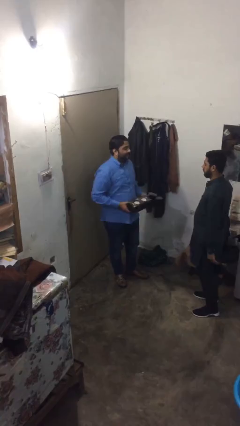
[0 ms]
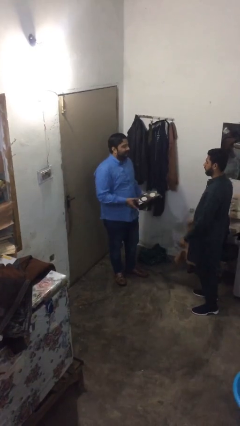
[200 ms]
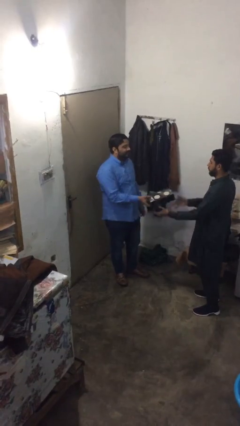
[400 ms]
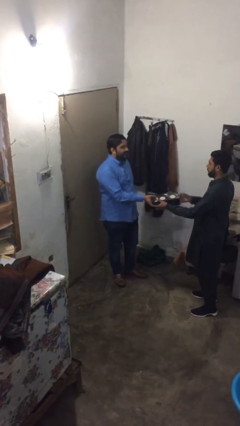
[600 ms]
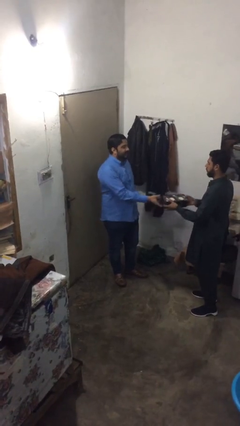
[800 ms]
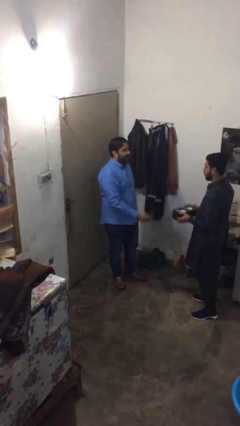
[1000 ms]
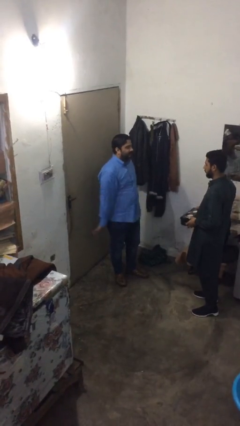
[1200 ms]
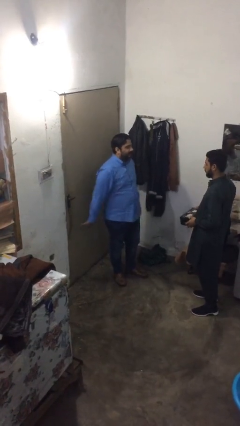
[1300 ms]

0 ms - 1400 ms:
person transfers object to person

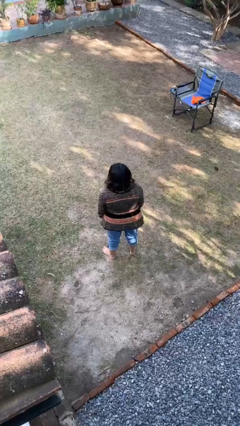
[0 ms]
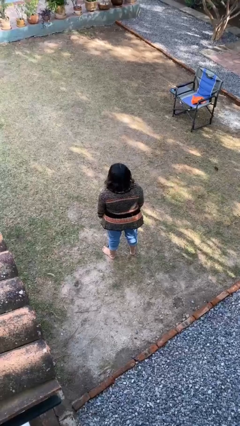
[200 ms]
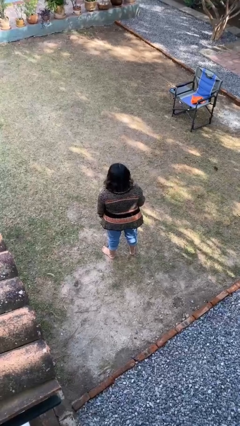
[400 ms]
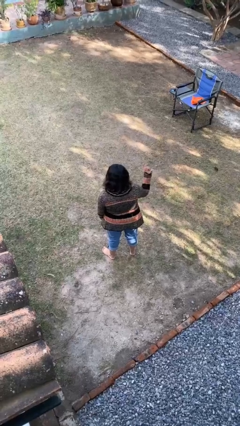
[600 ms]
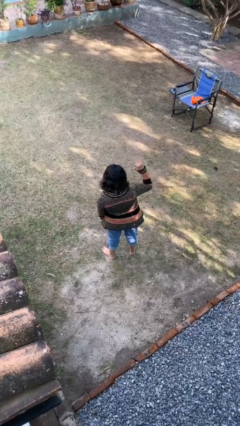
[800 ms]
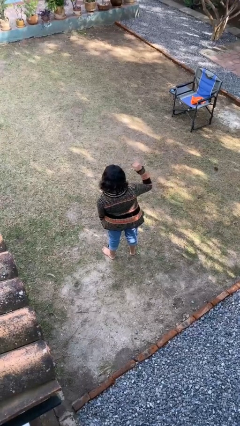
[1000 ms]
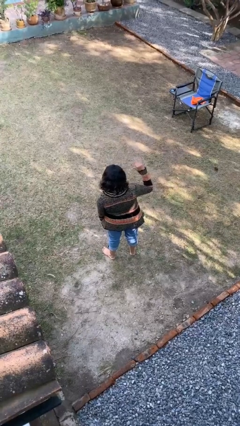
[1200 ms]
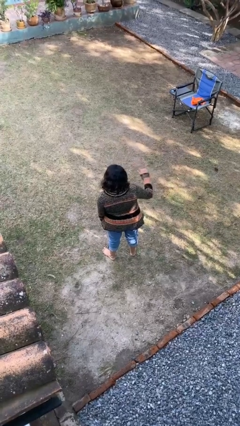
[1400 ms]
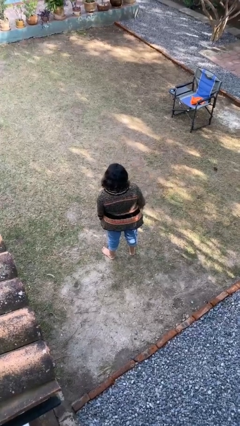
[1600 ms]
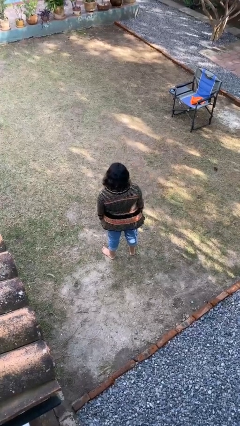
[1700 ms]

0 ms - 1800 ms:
person gestures hang loose

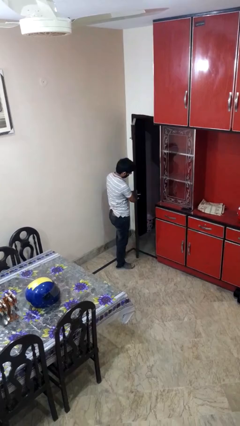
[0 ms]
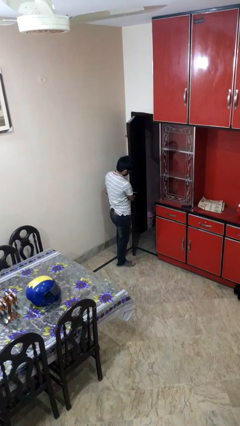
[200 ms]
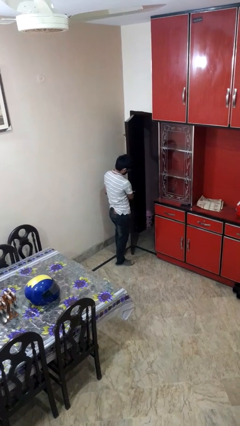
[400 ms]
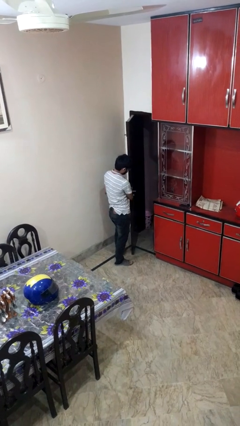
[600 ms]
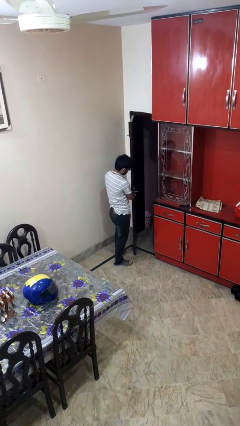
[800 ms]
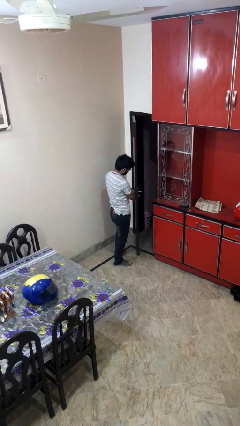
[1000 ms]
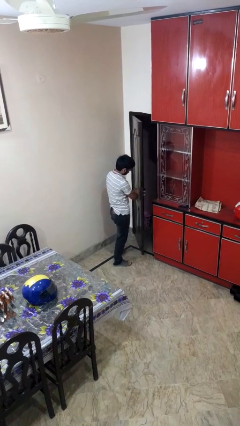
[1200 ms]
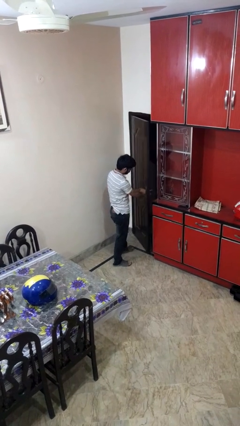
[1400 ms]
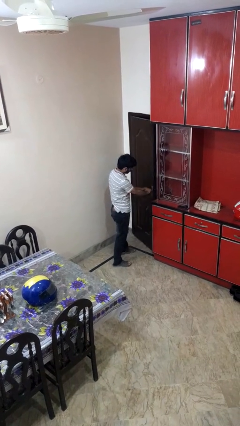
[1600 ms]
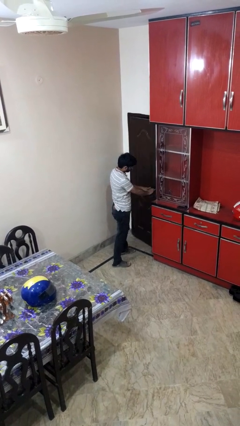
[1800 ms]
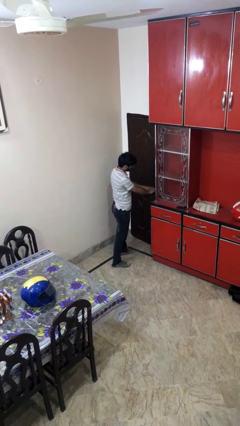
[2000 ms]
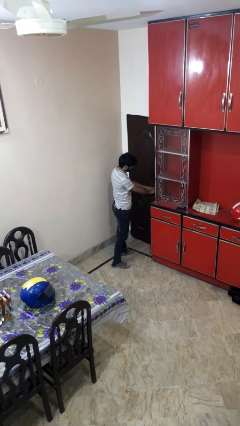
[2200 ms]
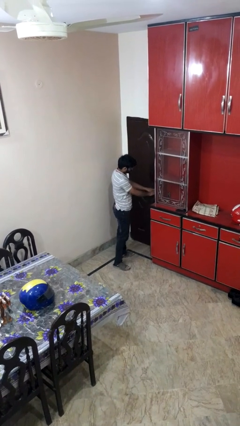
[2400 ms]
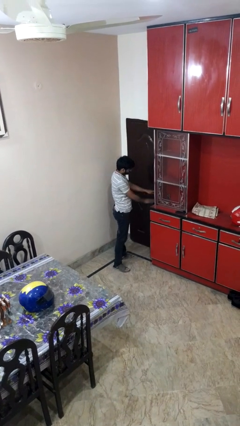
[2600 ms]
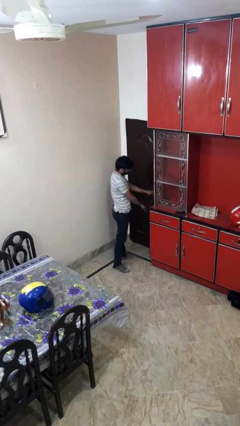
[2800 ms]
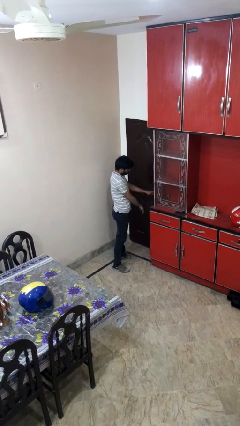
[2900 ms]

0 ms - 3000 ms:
person closes facility door

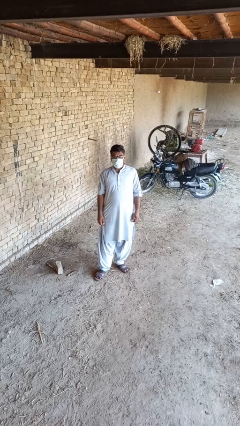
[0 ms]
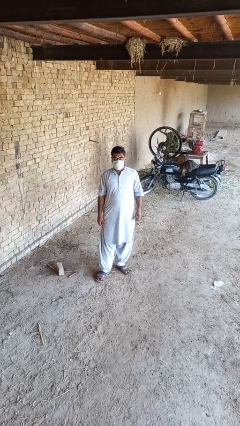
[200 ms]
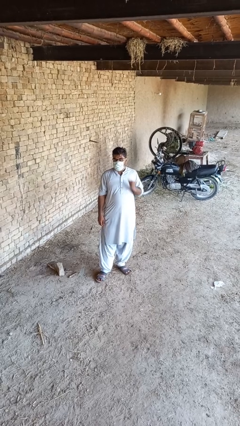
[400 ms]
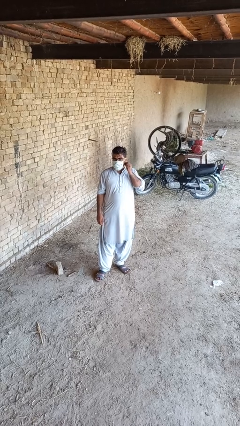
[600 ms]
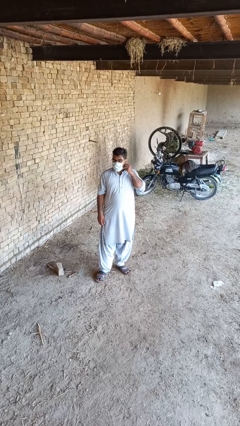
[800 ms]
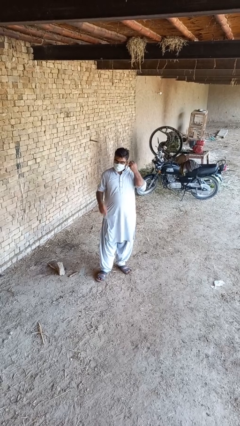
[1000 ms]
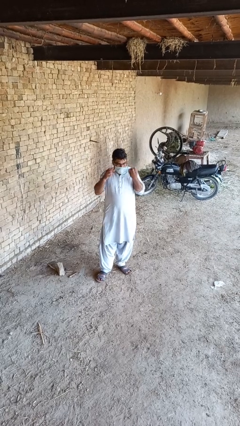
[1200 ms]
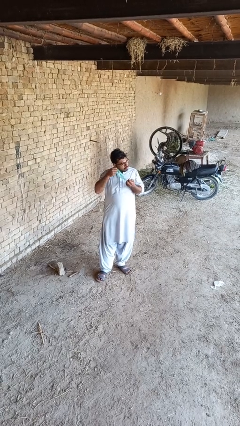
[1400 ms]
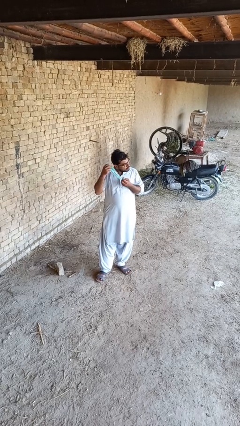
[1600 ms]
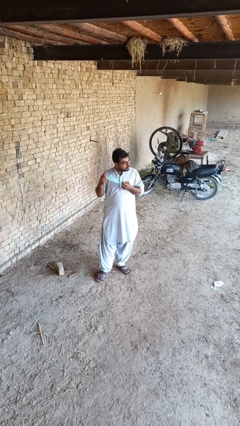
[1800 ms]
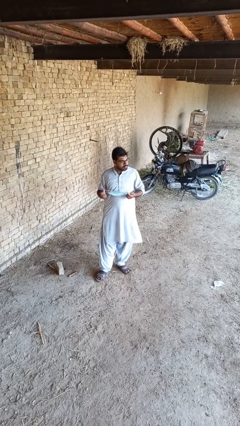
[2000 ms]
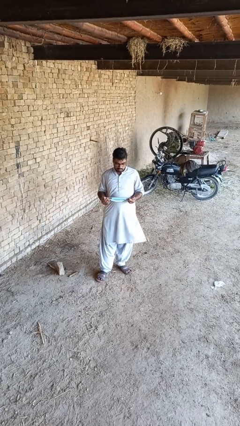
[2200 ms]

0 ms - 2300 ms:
person takes off facemask

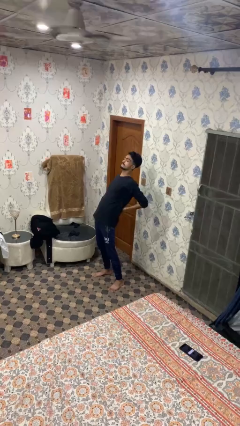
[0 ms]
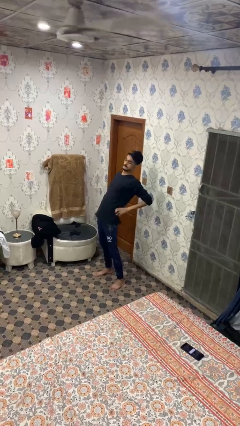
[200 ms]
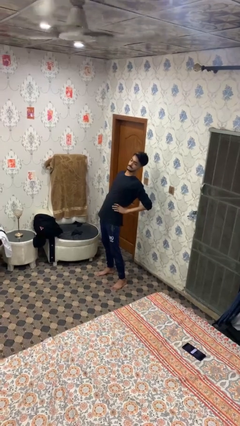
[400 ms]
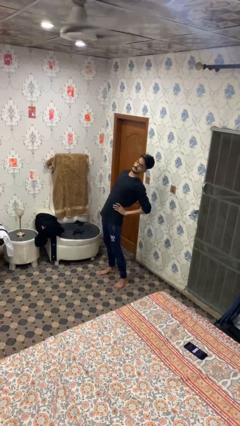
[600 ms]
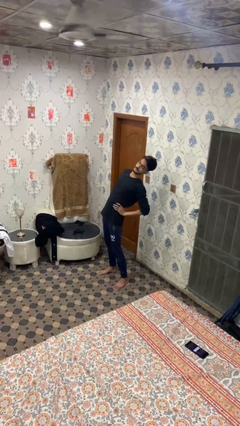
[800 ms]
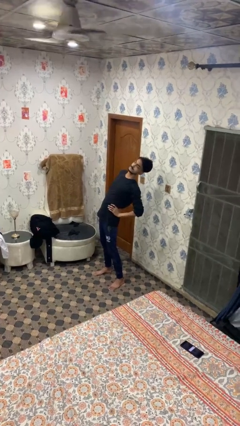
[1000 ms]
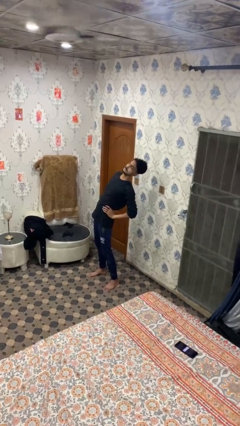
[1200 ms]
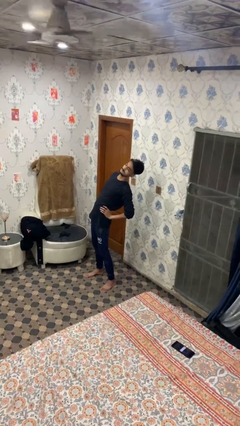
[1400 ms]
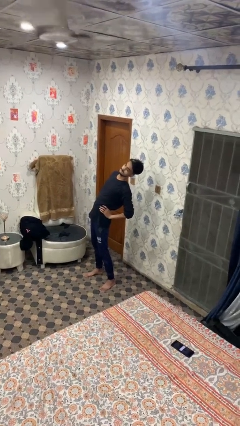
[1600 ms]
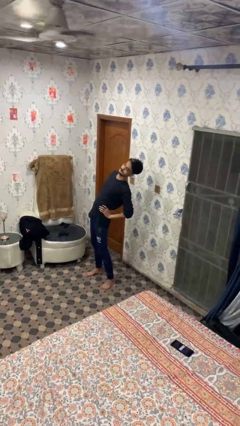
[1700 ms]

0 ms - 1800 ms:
person stretches arms to side

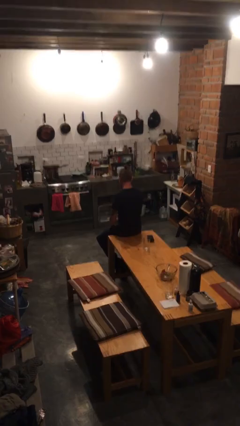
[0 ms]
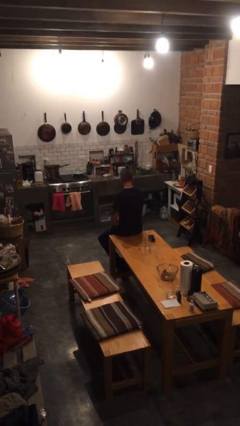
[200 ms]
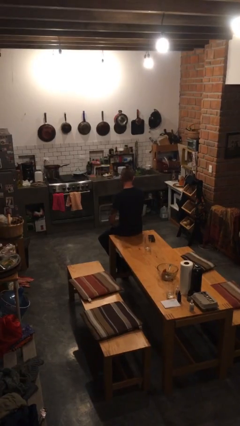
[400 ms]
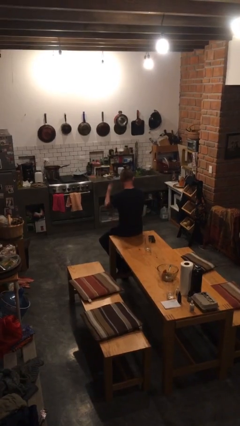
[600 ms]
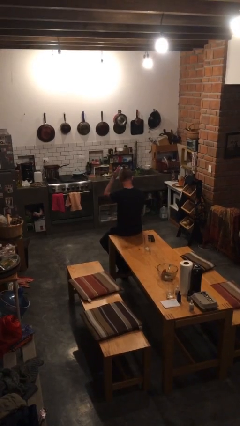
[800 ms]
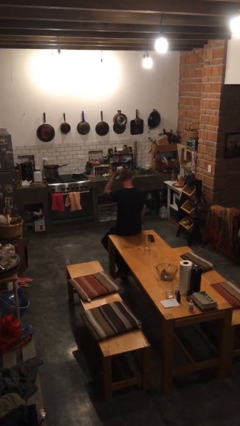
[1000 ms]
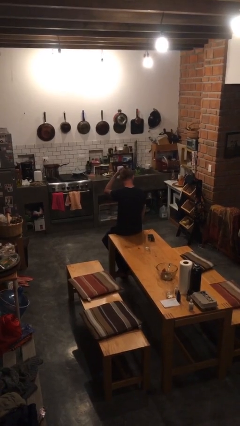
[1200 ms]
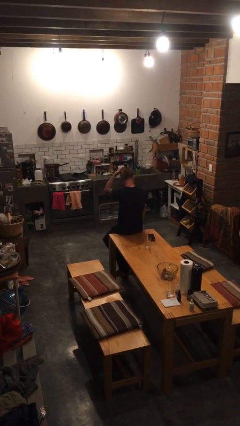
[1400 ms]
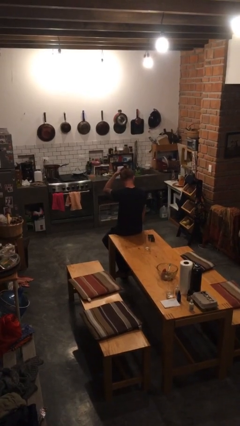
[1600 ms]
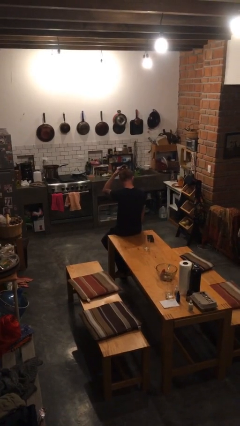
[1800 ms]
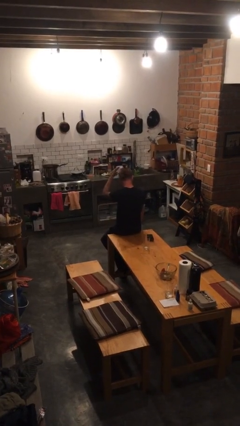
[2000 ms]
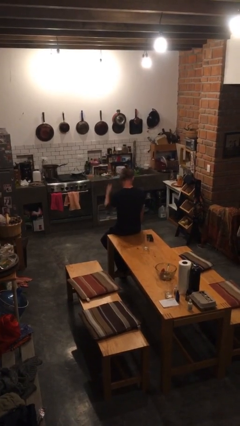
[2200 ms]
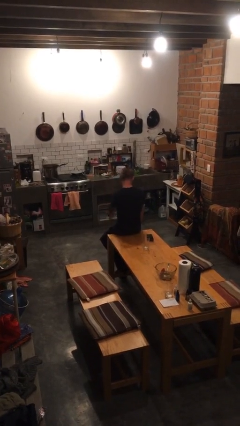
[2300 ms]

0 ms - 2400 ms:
person pats head

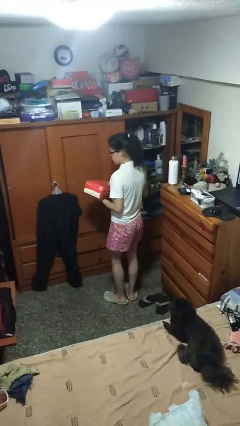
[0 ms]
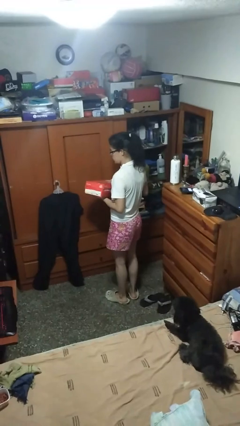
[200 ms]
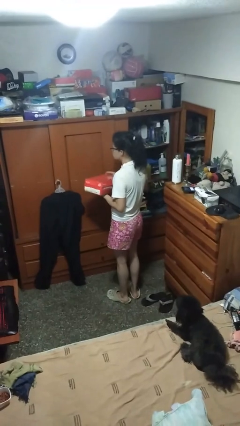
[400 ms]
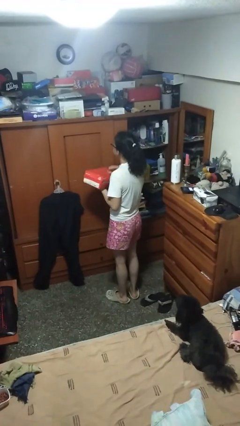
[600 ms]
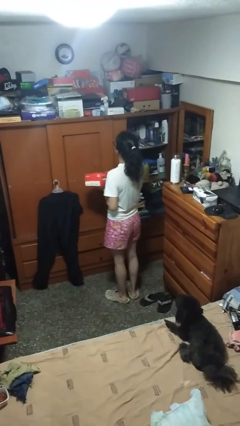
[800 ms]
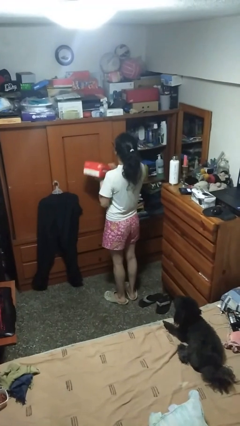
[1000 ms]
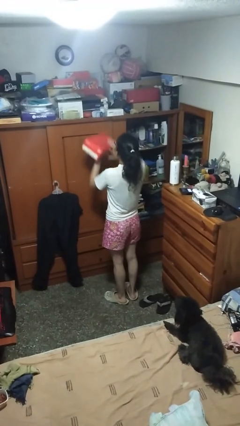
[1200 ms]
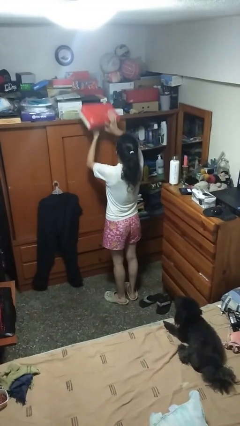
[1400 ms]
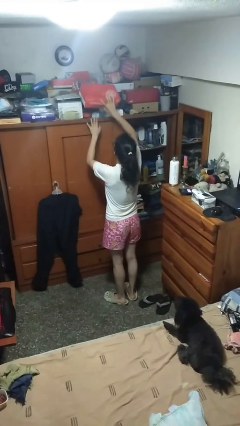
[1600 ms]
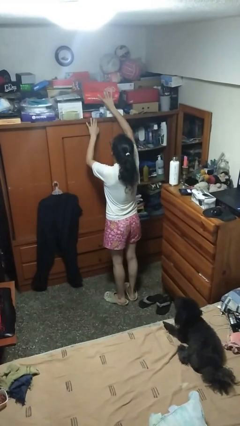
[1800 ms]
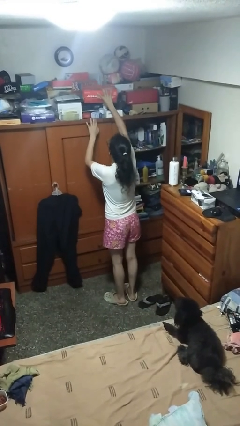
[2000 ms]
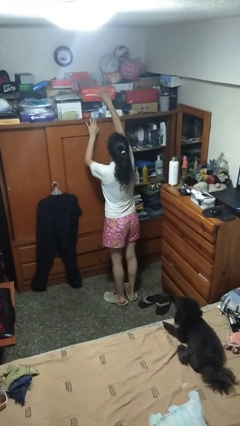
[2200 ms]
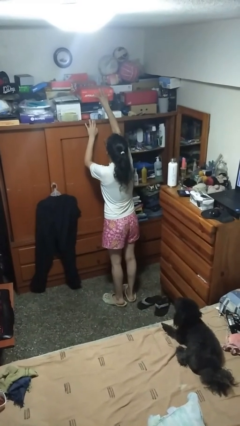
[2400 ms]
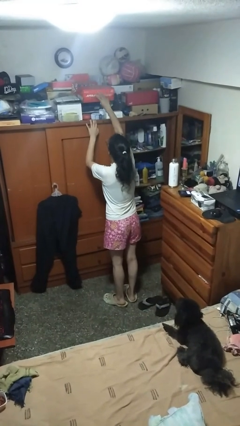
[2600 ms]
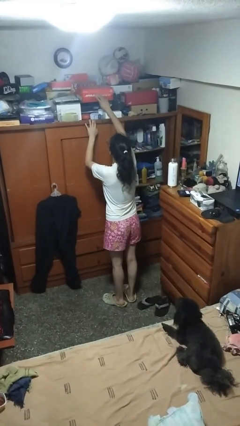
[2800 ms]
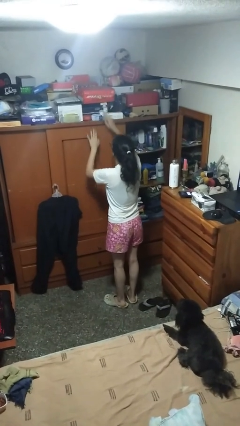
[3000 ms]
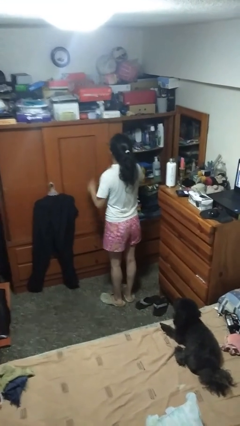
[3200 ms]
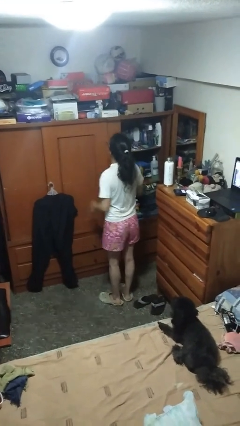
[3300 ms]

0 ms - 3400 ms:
person puts down object on shelf

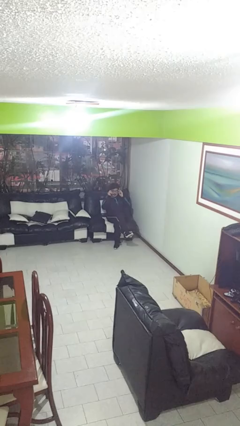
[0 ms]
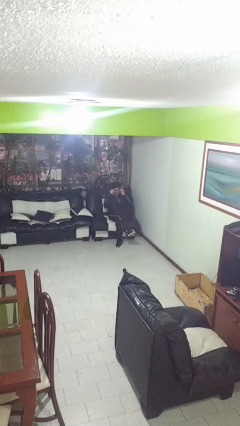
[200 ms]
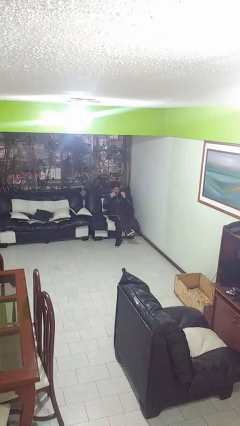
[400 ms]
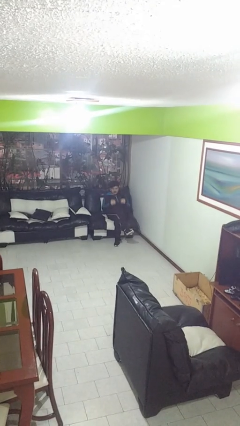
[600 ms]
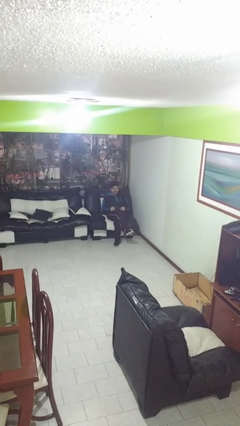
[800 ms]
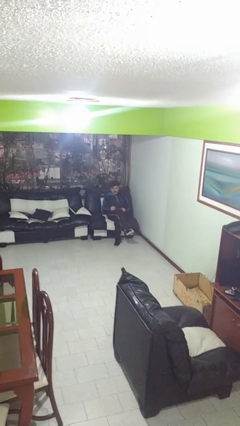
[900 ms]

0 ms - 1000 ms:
person takes off glasses

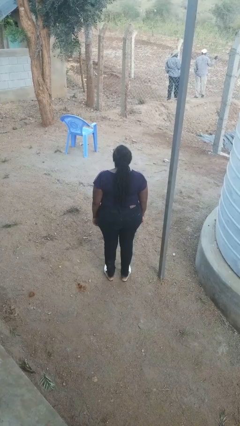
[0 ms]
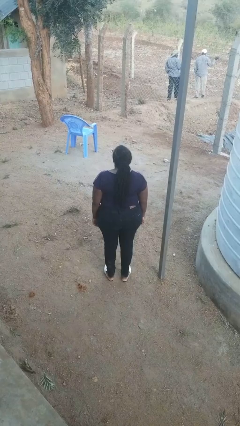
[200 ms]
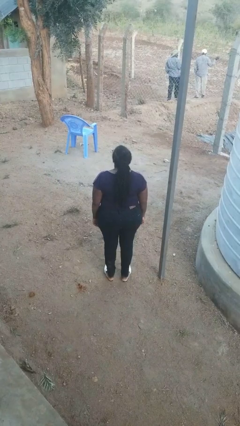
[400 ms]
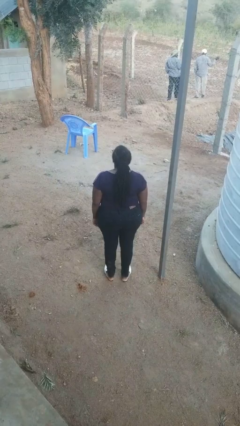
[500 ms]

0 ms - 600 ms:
person shrugs
